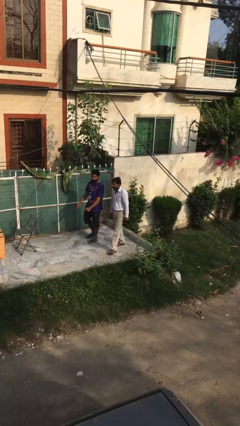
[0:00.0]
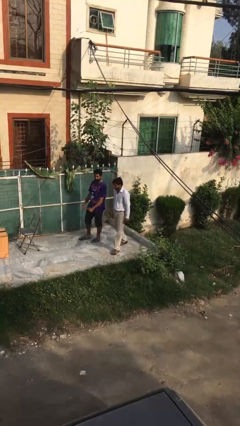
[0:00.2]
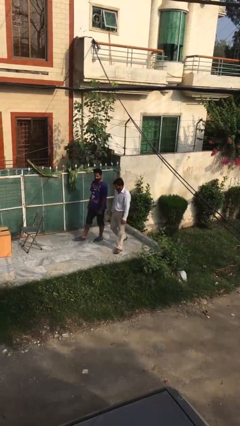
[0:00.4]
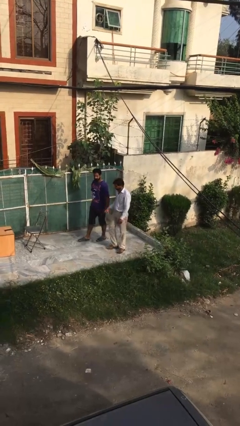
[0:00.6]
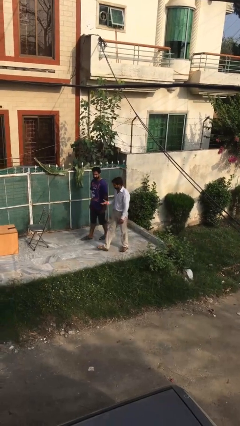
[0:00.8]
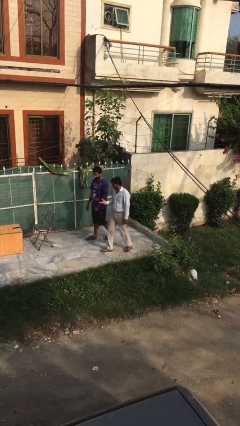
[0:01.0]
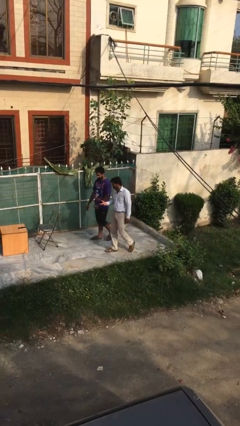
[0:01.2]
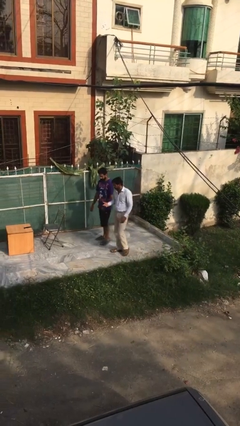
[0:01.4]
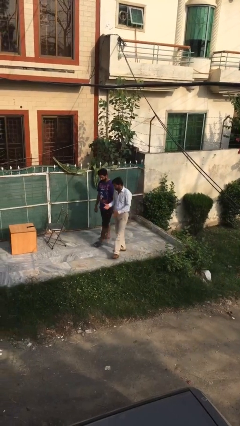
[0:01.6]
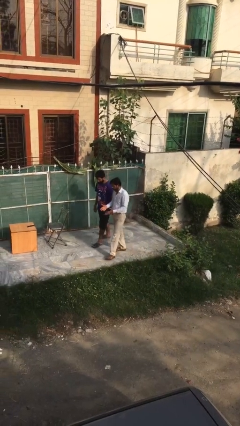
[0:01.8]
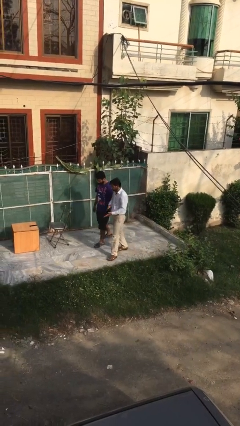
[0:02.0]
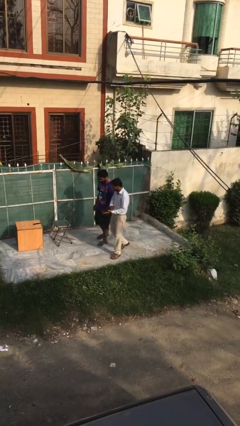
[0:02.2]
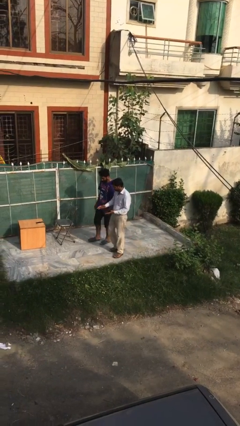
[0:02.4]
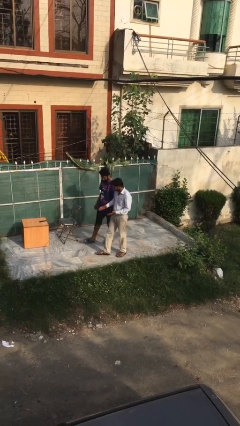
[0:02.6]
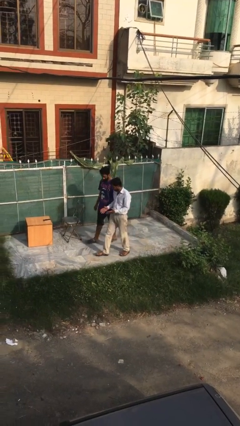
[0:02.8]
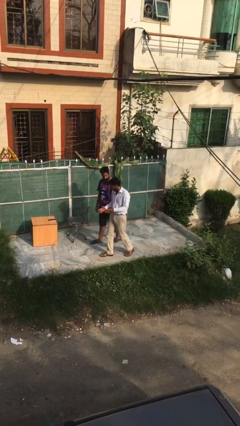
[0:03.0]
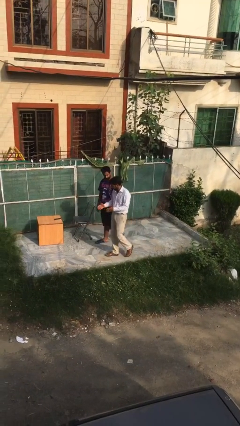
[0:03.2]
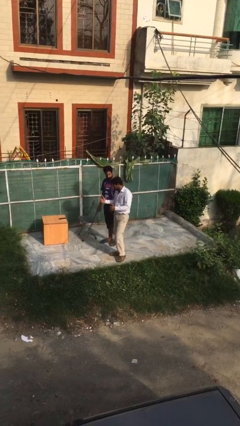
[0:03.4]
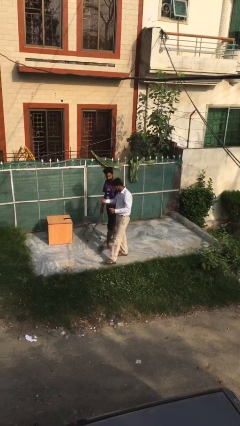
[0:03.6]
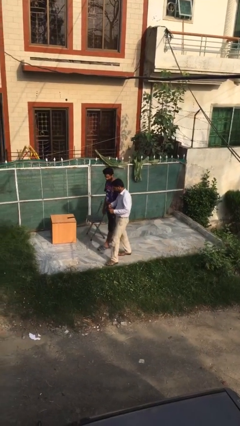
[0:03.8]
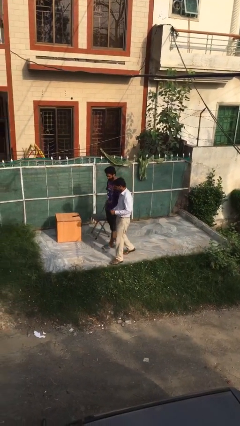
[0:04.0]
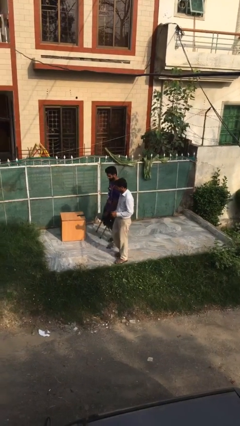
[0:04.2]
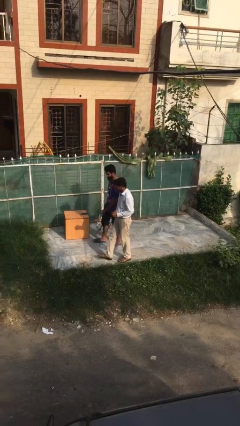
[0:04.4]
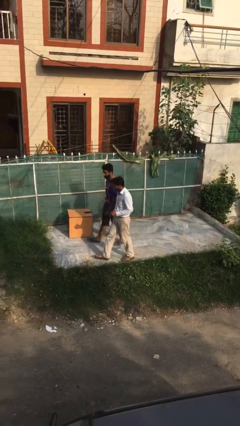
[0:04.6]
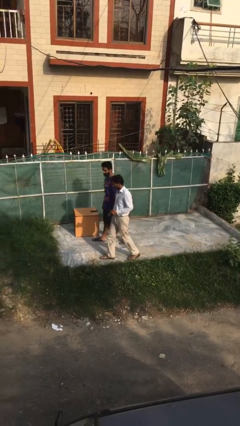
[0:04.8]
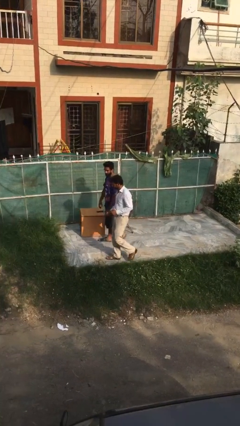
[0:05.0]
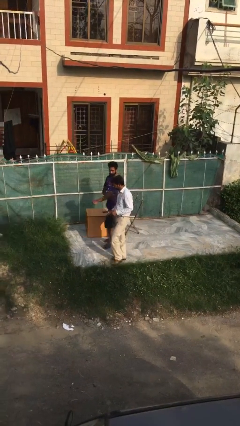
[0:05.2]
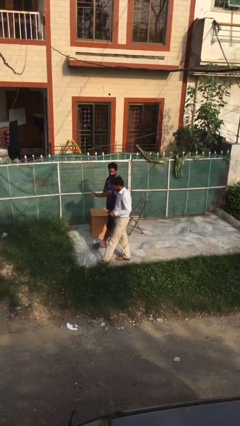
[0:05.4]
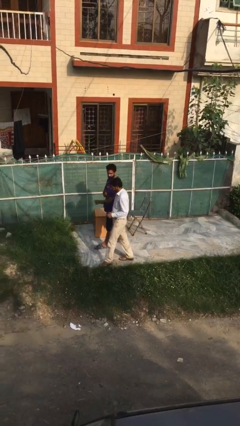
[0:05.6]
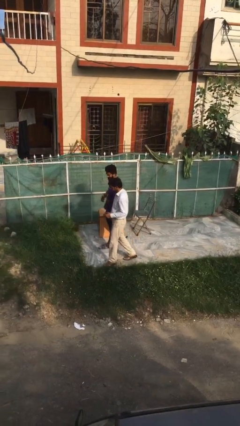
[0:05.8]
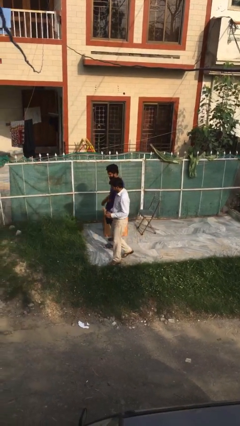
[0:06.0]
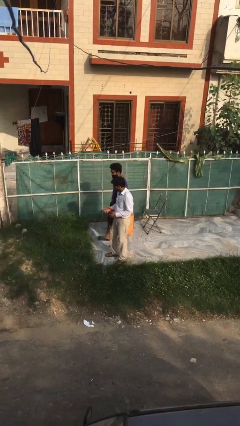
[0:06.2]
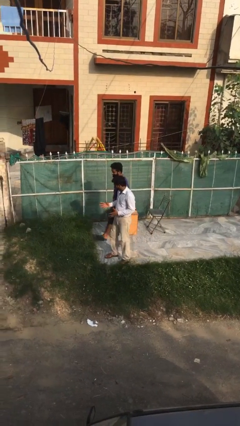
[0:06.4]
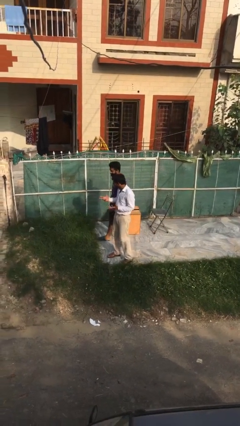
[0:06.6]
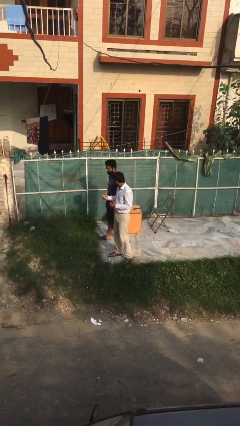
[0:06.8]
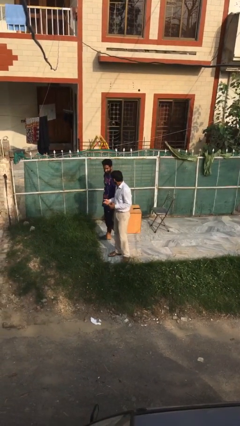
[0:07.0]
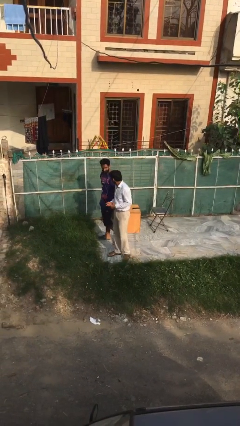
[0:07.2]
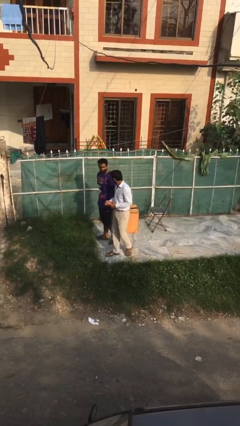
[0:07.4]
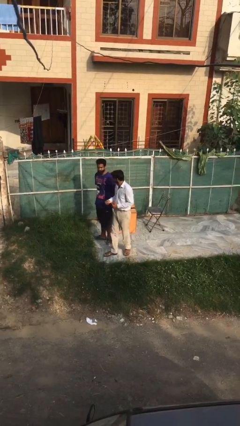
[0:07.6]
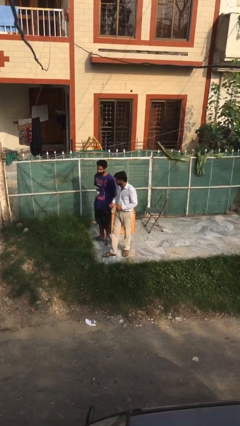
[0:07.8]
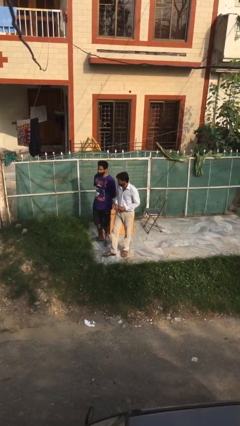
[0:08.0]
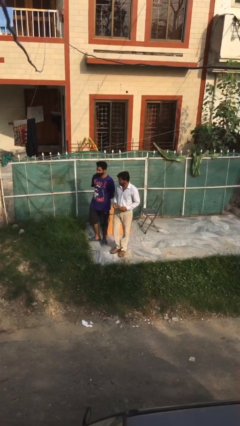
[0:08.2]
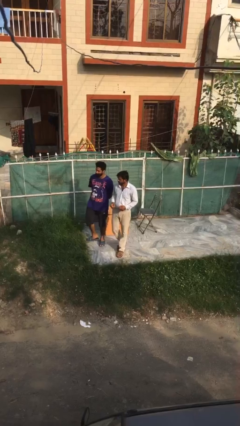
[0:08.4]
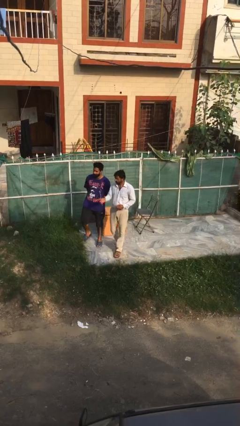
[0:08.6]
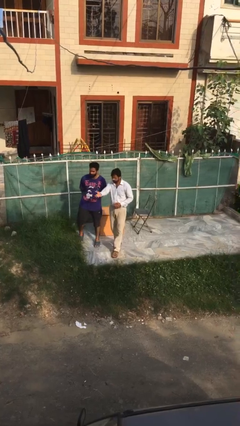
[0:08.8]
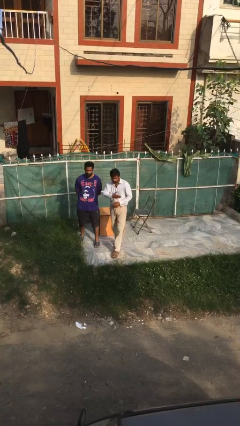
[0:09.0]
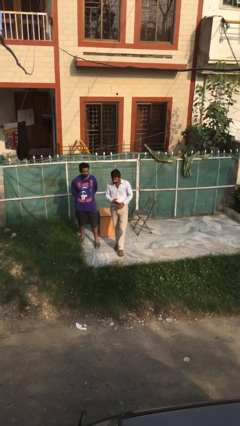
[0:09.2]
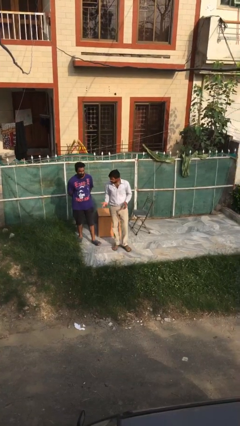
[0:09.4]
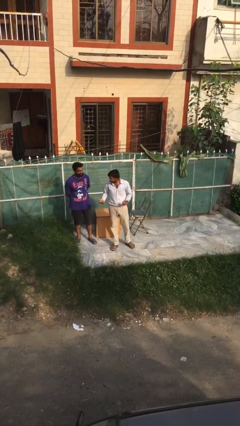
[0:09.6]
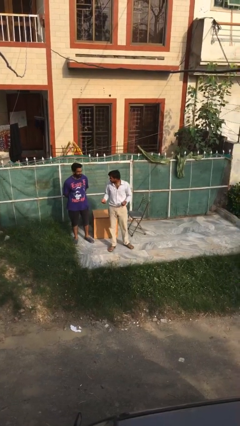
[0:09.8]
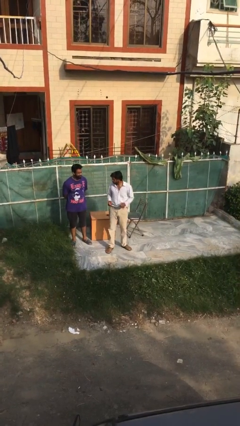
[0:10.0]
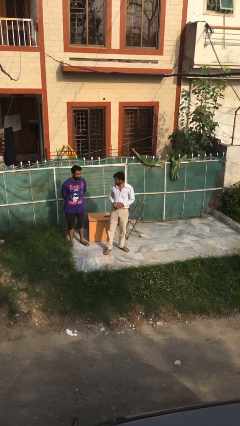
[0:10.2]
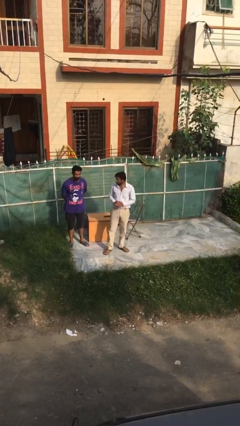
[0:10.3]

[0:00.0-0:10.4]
person talks to person

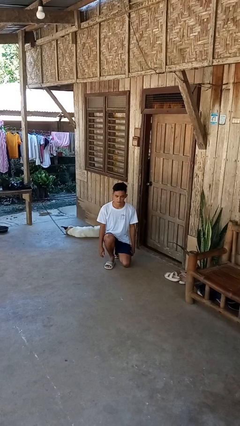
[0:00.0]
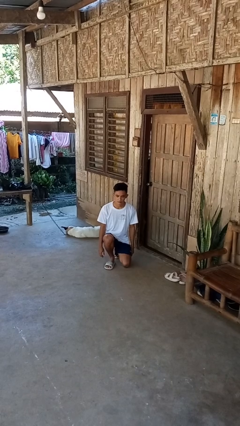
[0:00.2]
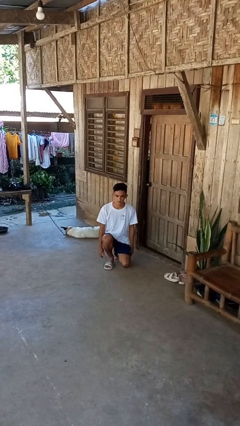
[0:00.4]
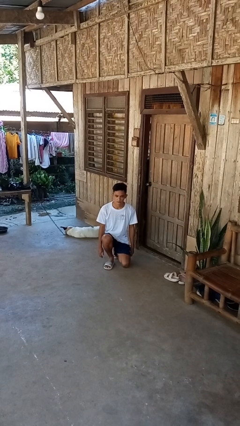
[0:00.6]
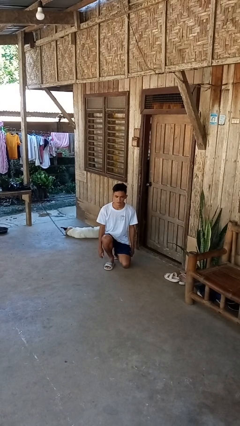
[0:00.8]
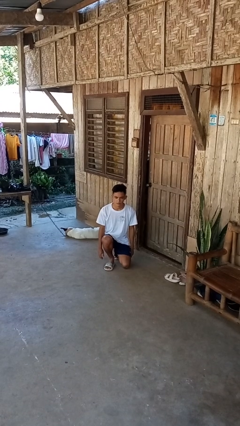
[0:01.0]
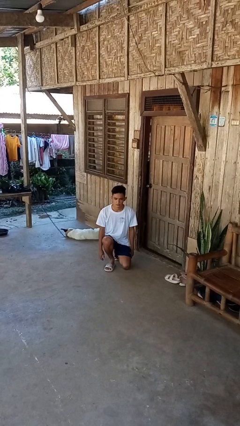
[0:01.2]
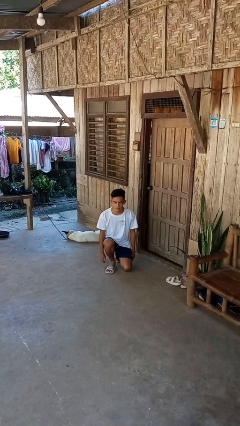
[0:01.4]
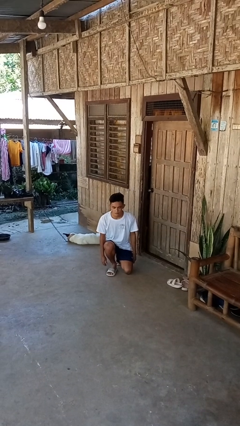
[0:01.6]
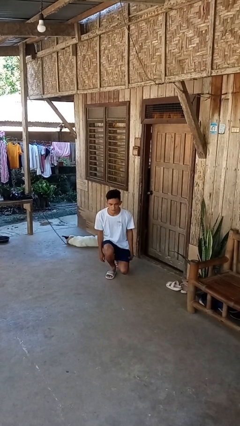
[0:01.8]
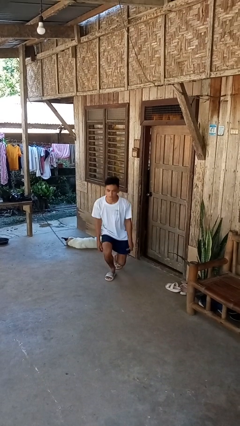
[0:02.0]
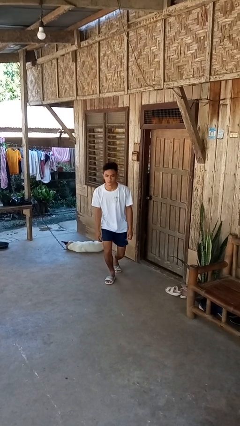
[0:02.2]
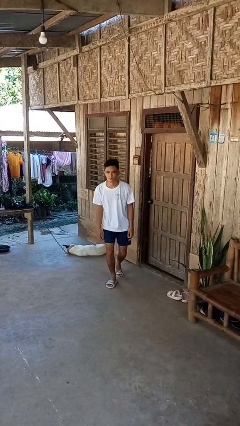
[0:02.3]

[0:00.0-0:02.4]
person kneels

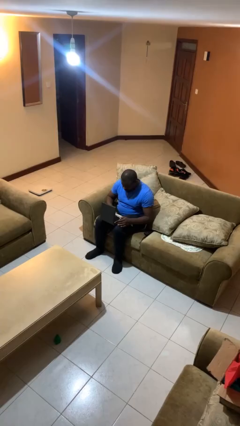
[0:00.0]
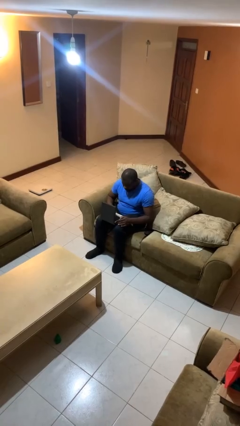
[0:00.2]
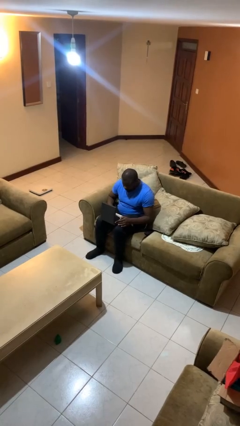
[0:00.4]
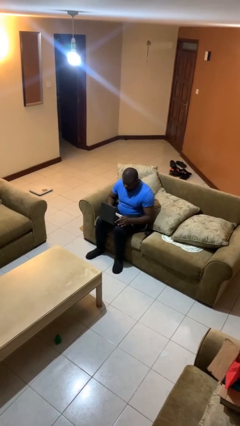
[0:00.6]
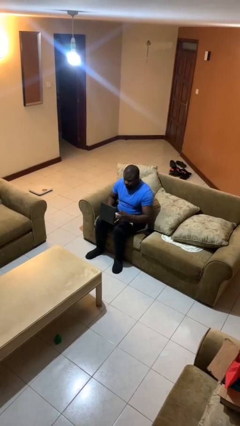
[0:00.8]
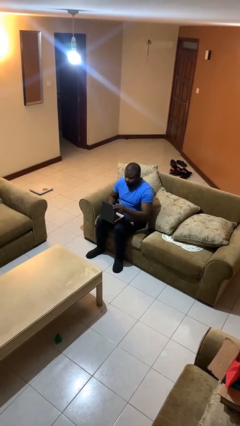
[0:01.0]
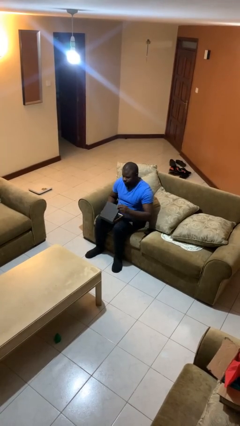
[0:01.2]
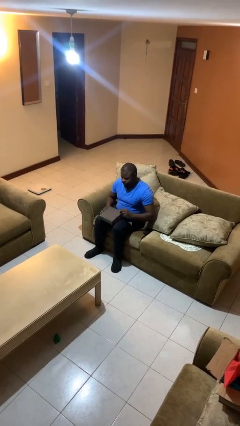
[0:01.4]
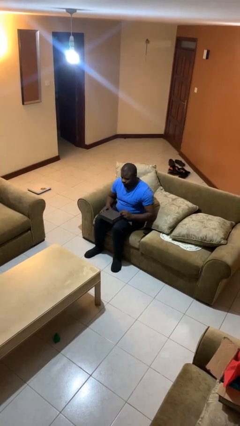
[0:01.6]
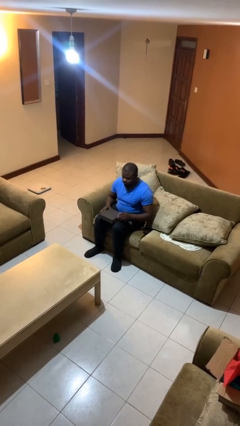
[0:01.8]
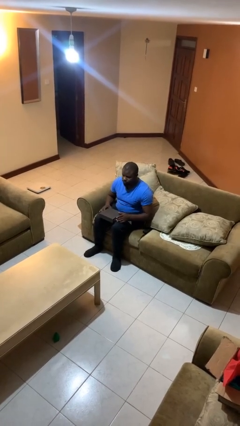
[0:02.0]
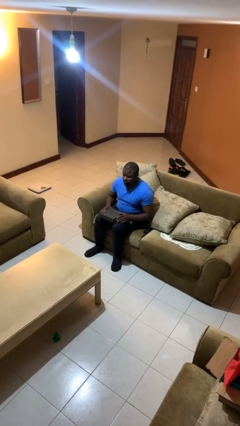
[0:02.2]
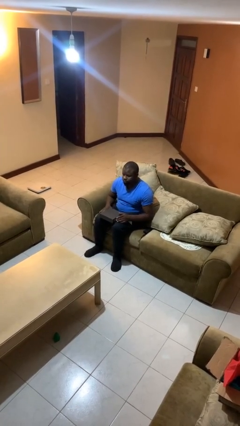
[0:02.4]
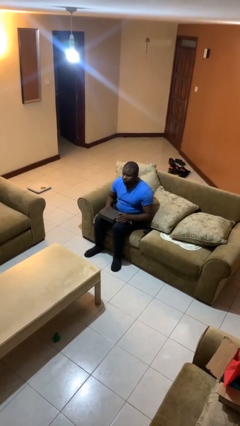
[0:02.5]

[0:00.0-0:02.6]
person closes jewelry box

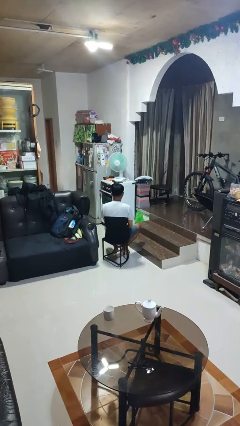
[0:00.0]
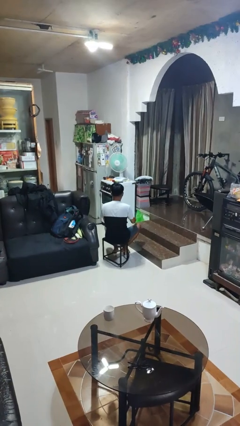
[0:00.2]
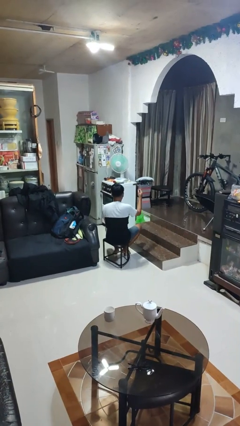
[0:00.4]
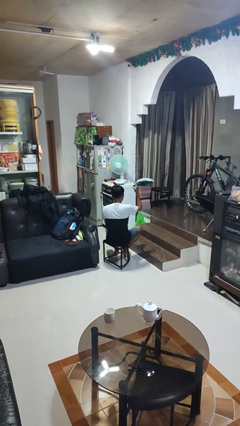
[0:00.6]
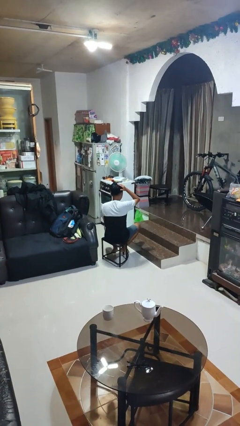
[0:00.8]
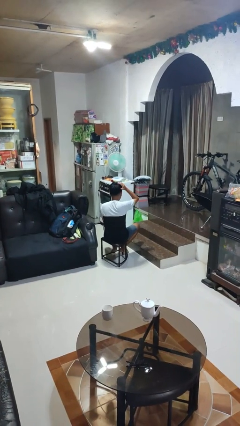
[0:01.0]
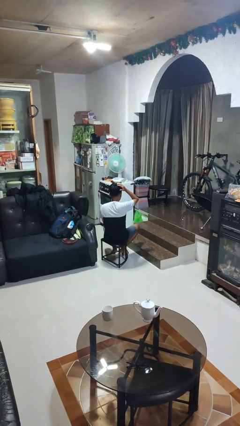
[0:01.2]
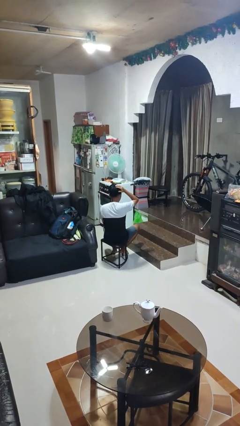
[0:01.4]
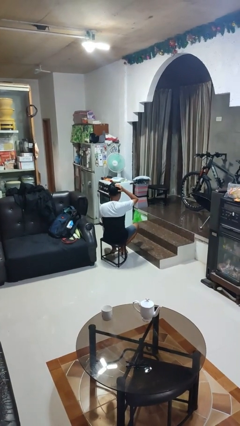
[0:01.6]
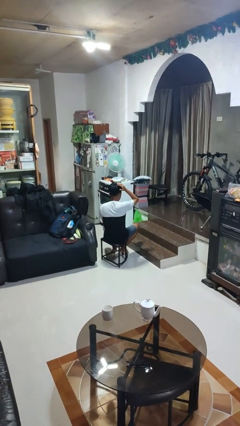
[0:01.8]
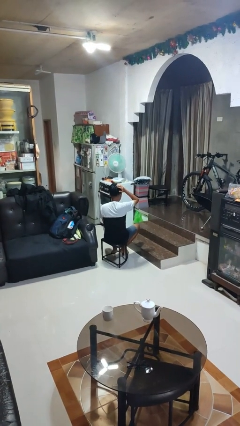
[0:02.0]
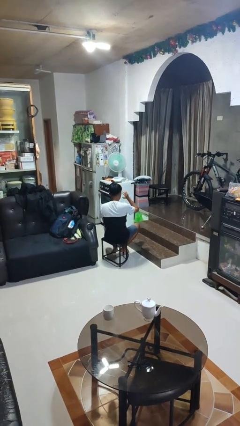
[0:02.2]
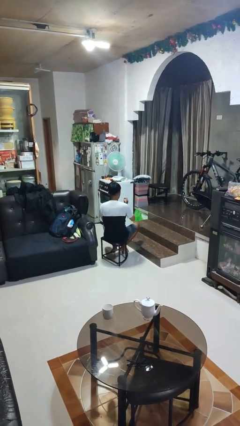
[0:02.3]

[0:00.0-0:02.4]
person pats head
